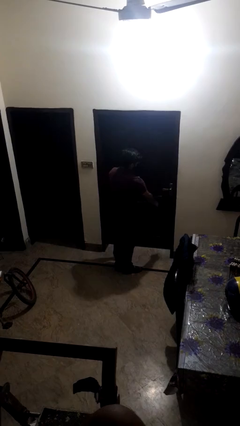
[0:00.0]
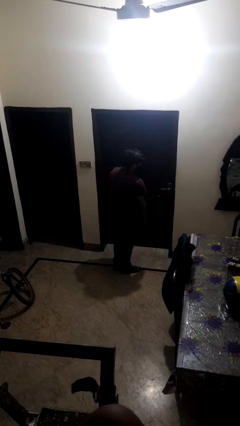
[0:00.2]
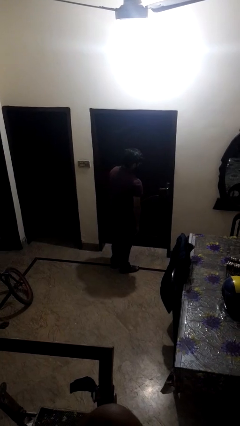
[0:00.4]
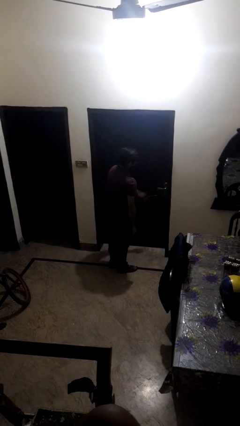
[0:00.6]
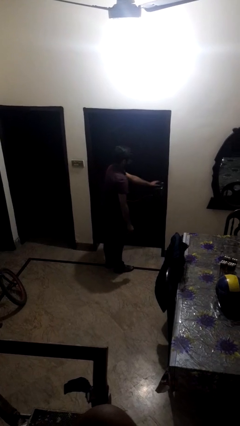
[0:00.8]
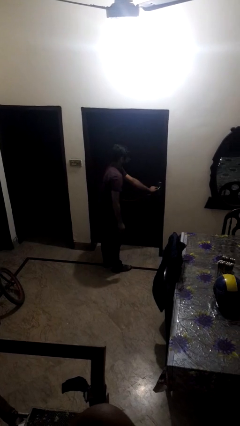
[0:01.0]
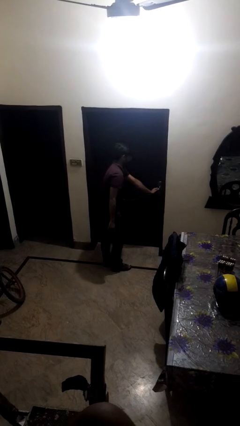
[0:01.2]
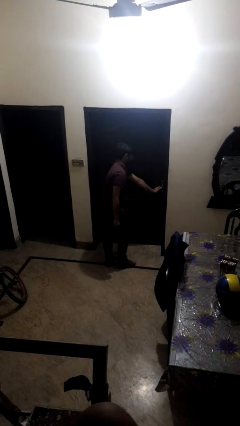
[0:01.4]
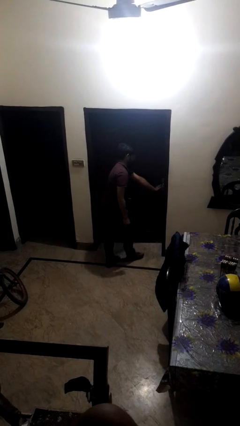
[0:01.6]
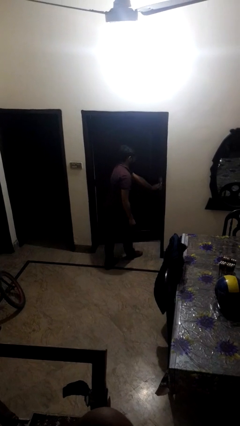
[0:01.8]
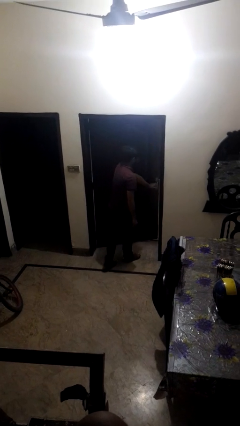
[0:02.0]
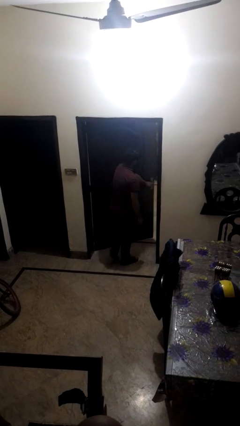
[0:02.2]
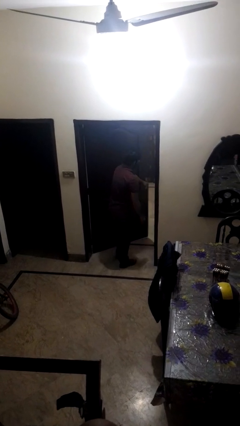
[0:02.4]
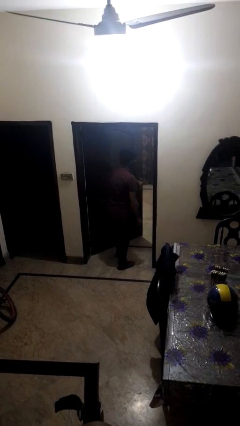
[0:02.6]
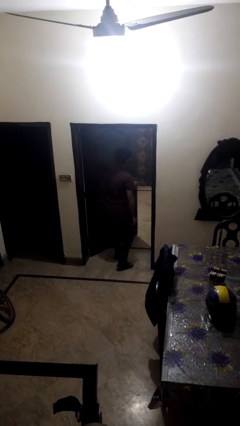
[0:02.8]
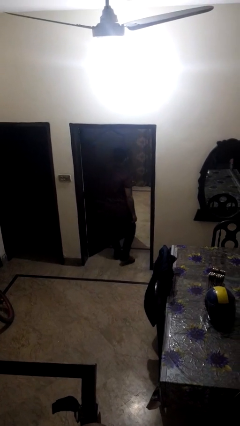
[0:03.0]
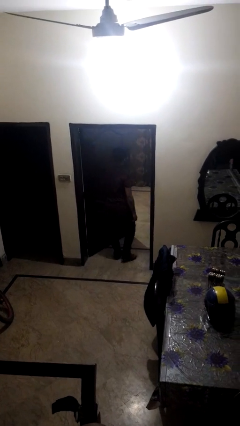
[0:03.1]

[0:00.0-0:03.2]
person opens facility door

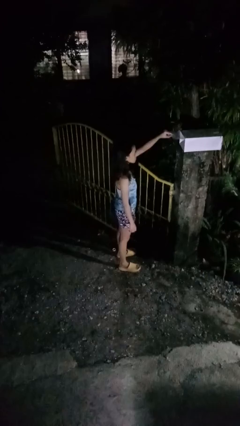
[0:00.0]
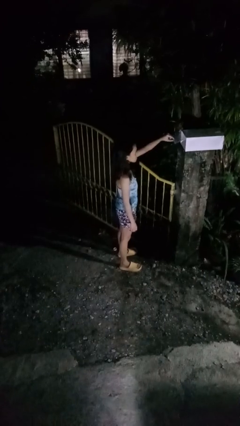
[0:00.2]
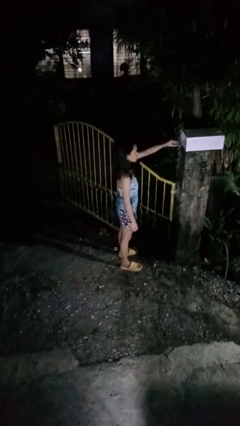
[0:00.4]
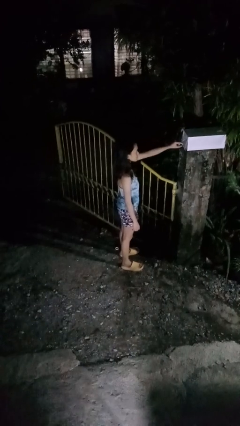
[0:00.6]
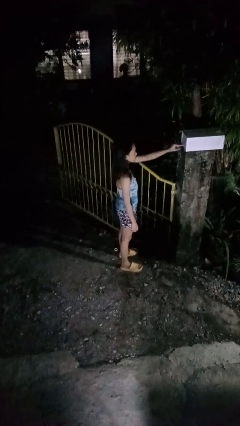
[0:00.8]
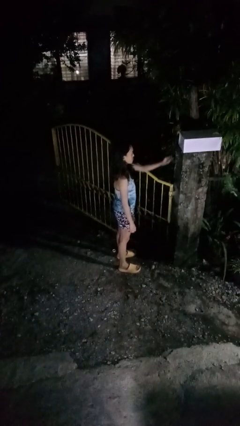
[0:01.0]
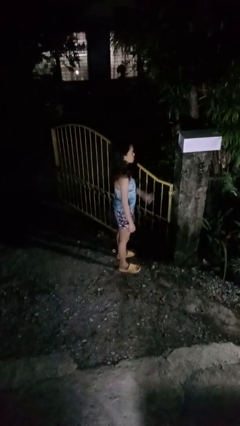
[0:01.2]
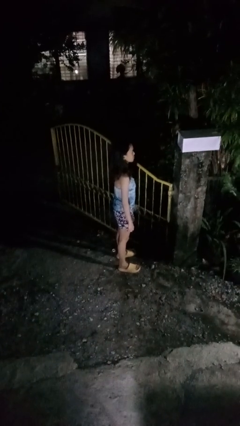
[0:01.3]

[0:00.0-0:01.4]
person closes mailbox

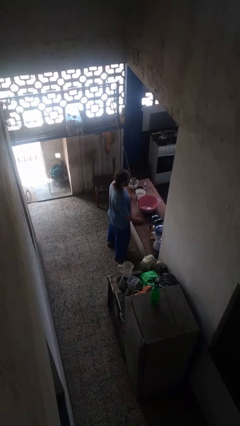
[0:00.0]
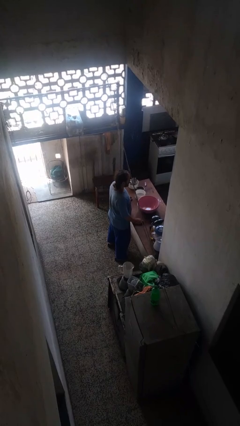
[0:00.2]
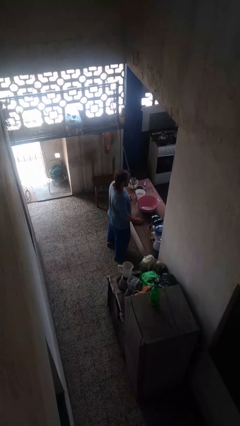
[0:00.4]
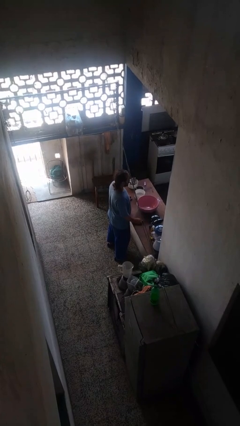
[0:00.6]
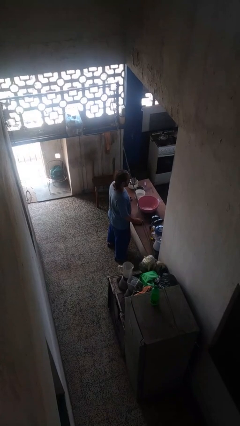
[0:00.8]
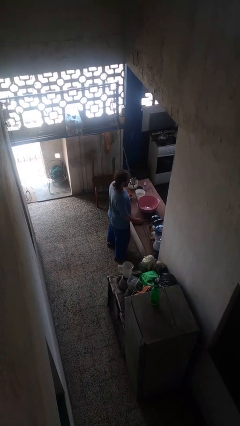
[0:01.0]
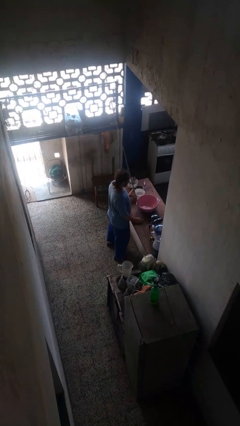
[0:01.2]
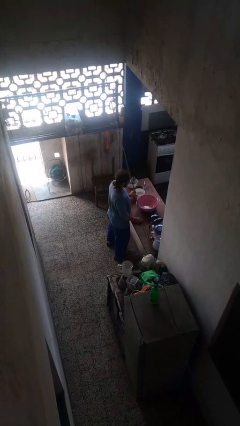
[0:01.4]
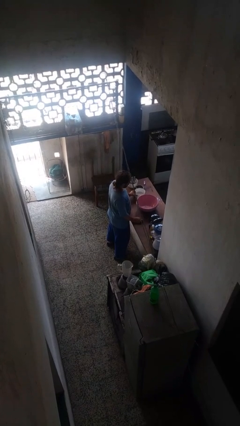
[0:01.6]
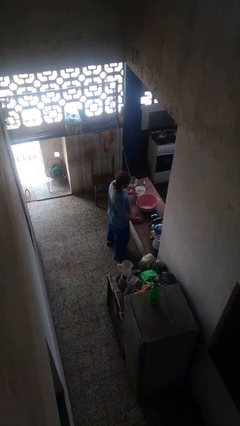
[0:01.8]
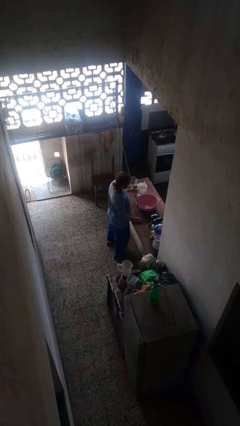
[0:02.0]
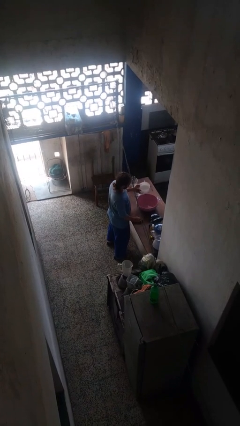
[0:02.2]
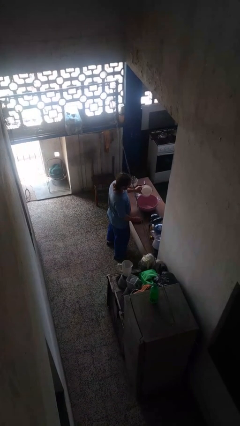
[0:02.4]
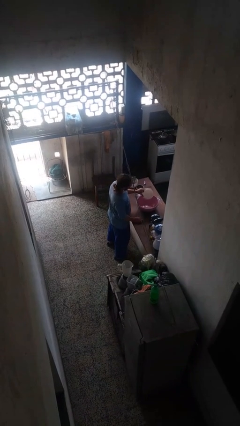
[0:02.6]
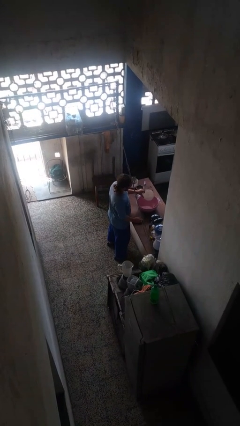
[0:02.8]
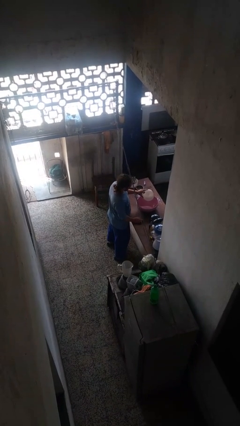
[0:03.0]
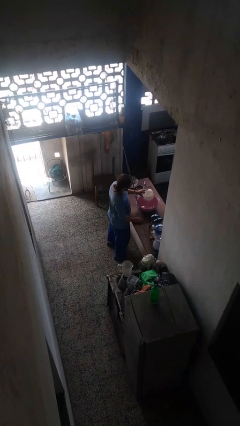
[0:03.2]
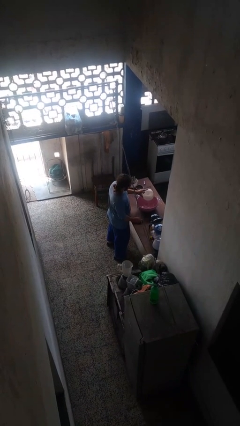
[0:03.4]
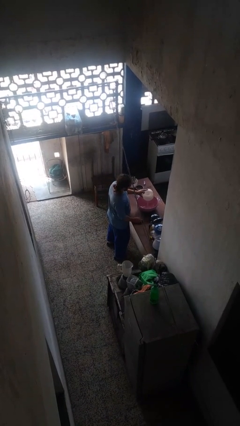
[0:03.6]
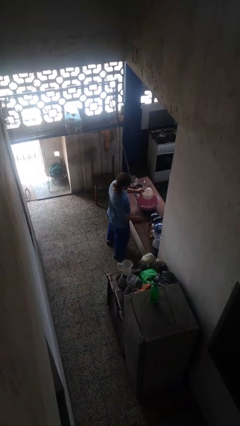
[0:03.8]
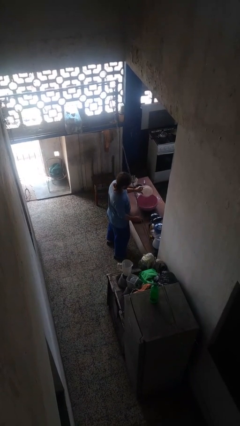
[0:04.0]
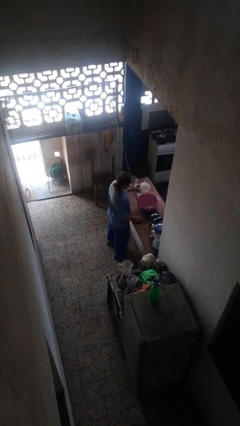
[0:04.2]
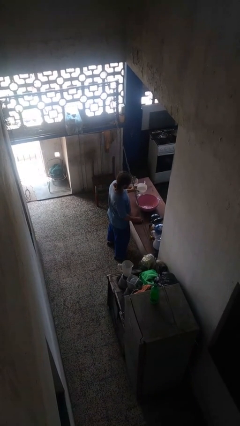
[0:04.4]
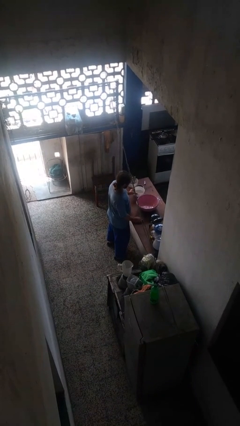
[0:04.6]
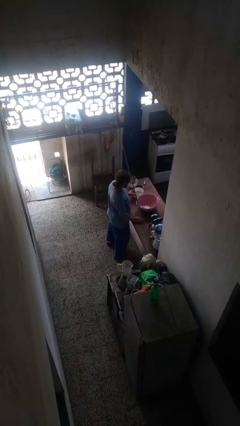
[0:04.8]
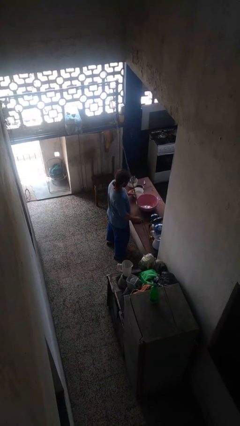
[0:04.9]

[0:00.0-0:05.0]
person pours into bowl

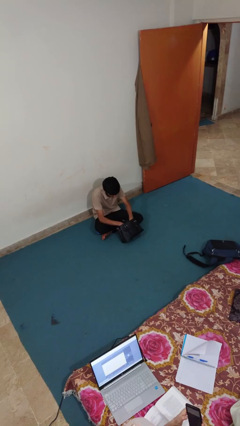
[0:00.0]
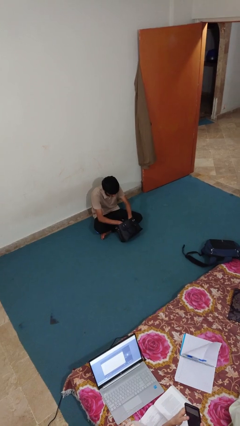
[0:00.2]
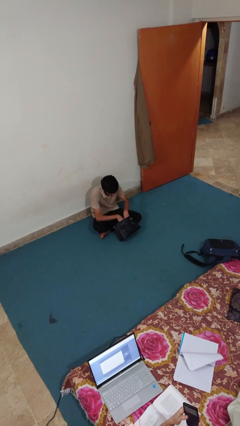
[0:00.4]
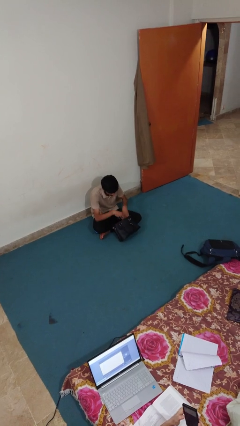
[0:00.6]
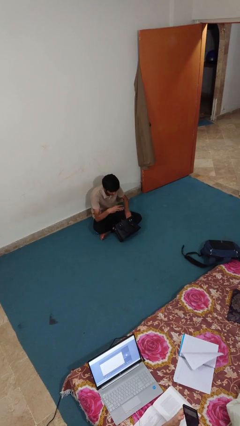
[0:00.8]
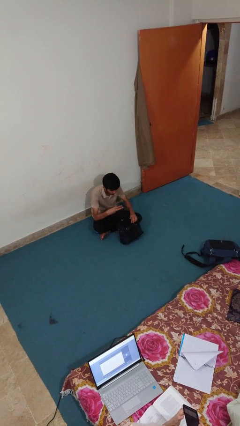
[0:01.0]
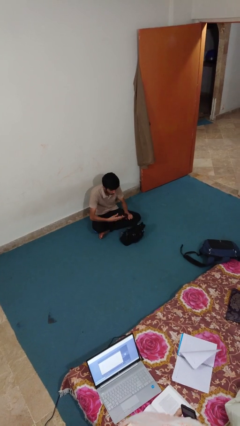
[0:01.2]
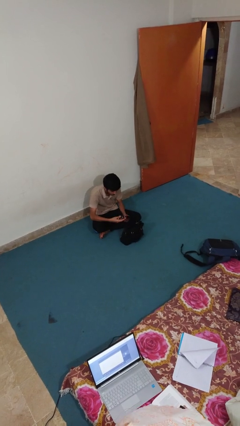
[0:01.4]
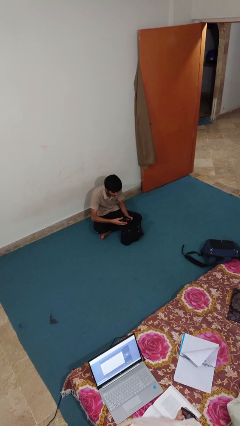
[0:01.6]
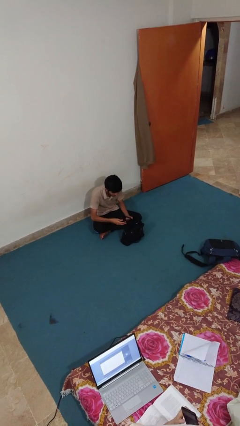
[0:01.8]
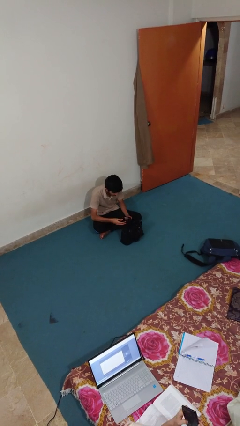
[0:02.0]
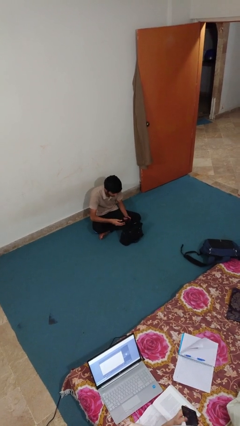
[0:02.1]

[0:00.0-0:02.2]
person takes object from purse

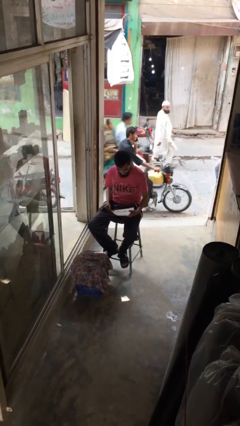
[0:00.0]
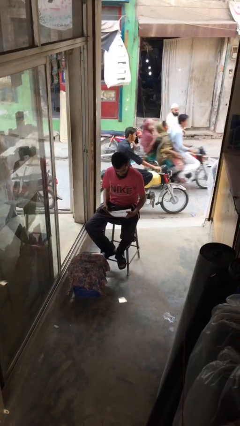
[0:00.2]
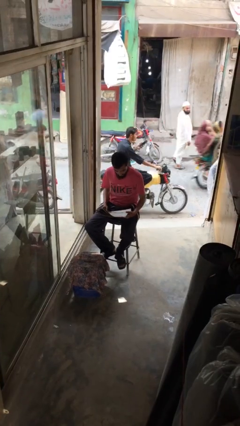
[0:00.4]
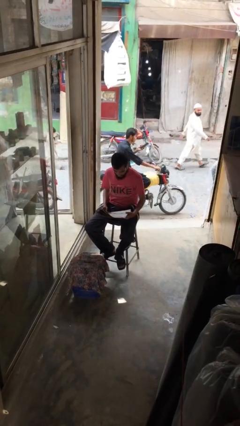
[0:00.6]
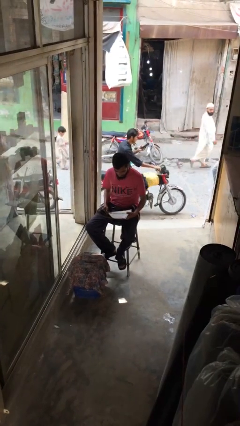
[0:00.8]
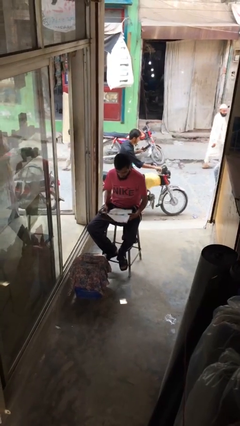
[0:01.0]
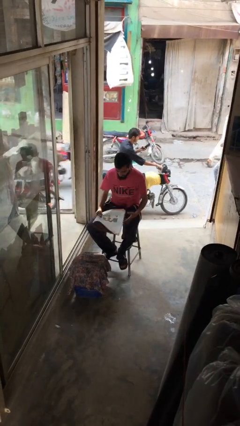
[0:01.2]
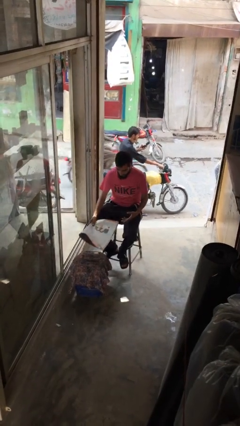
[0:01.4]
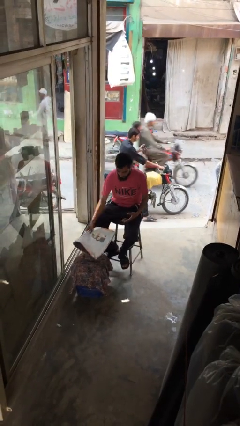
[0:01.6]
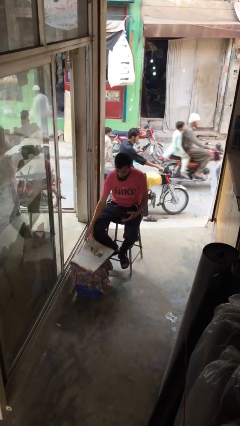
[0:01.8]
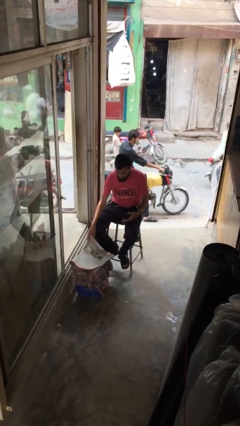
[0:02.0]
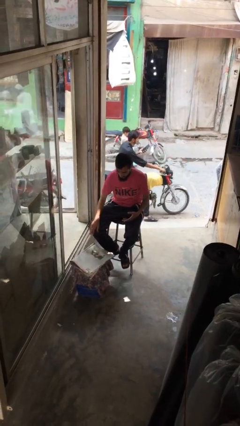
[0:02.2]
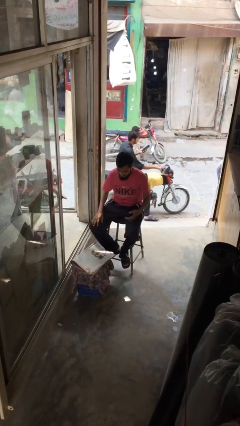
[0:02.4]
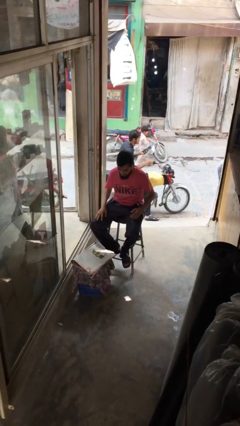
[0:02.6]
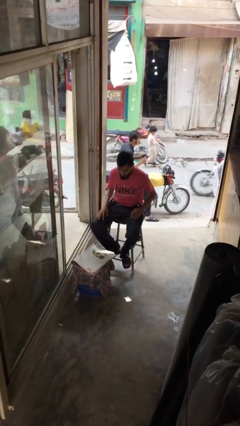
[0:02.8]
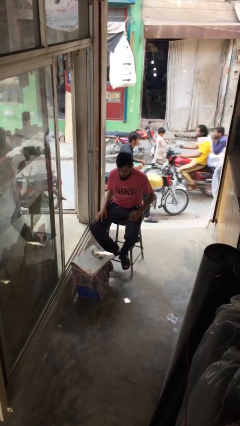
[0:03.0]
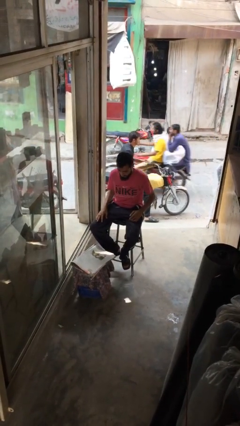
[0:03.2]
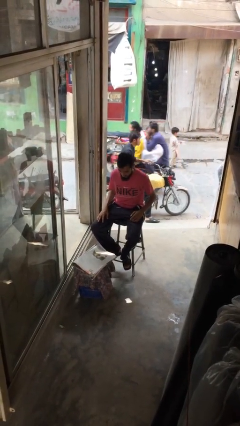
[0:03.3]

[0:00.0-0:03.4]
person puts down object on table

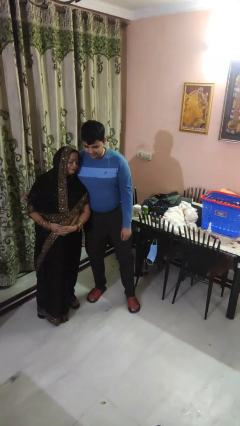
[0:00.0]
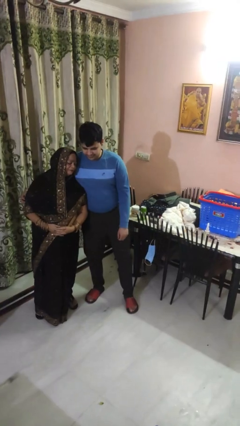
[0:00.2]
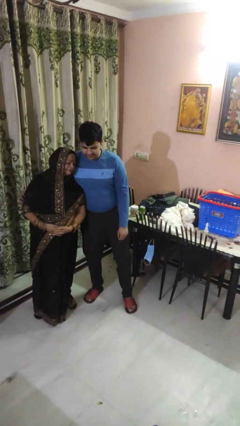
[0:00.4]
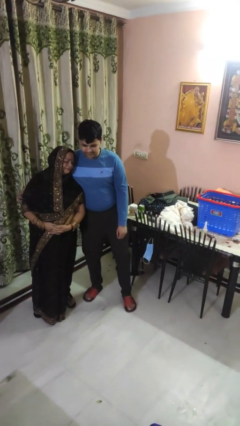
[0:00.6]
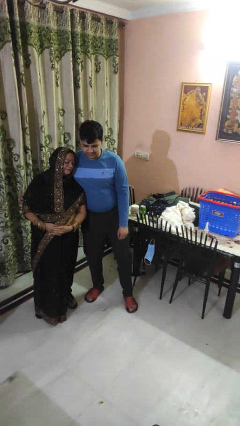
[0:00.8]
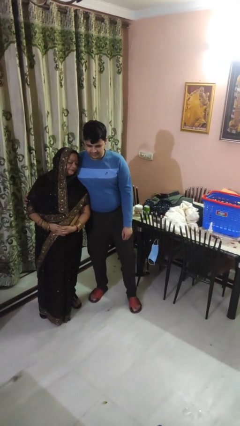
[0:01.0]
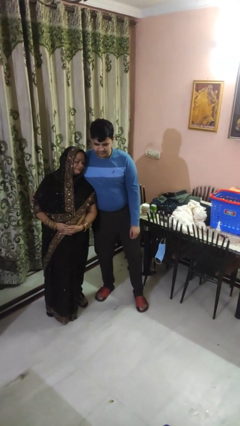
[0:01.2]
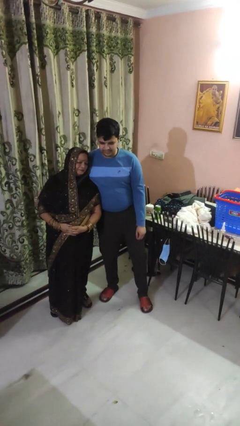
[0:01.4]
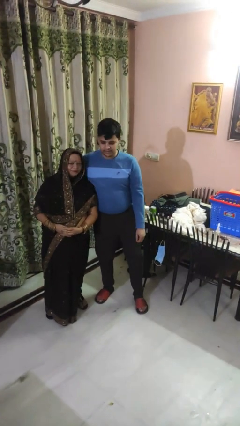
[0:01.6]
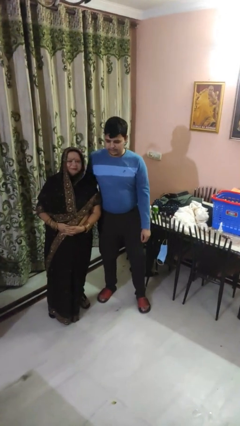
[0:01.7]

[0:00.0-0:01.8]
person hugs person from side

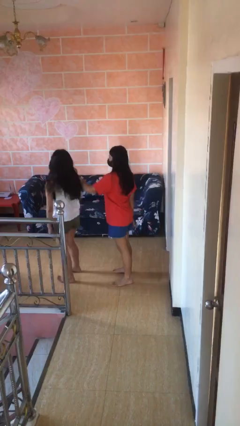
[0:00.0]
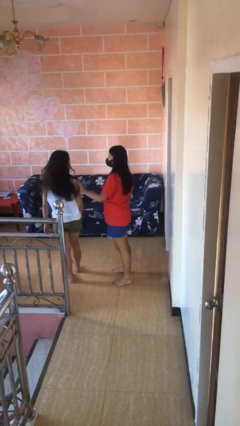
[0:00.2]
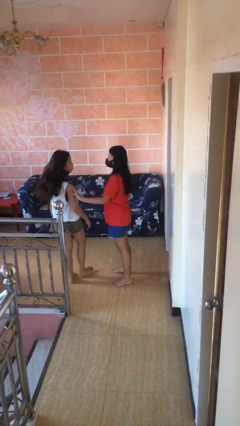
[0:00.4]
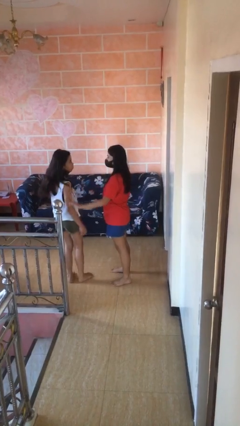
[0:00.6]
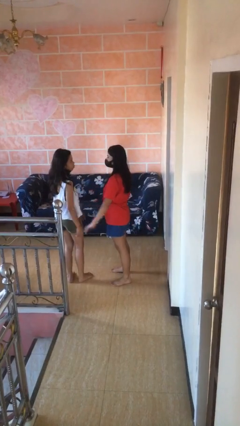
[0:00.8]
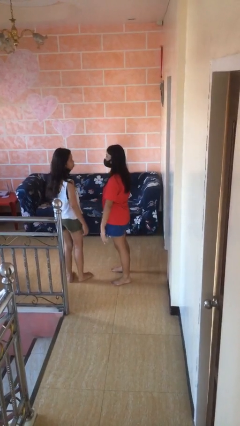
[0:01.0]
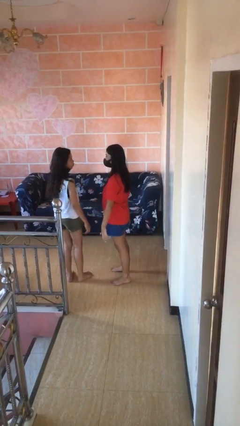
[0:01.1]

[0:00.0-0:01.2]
person spins person around
